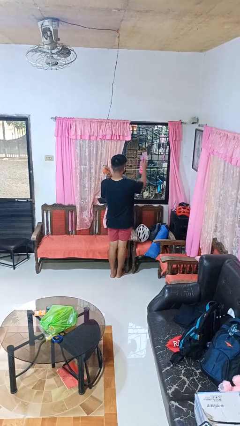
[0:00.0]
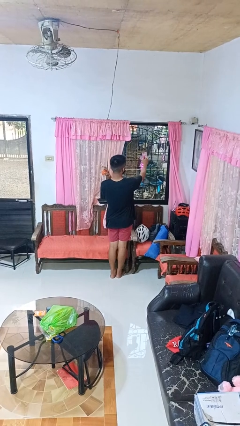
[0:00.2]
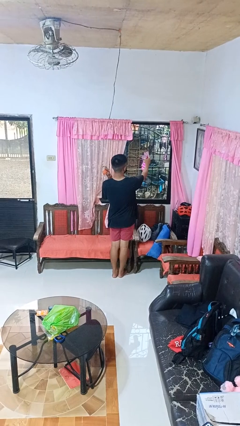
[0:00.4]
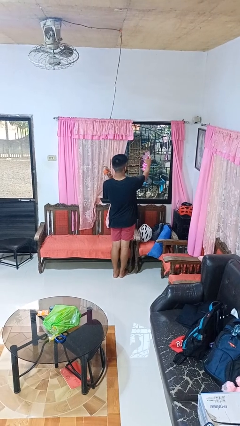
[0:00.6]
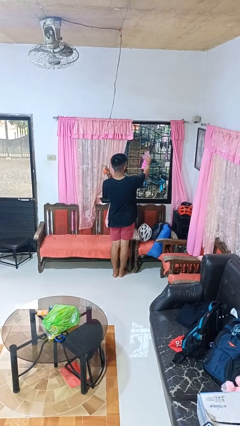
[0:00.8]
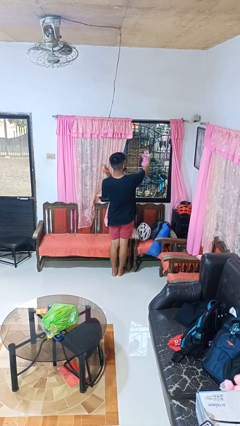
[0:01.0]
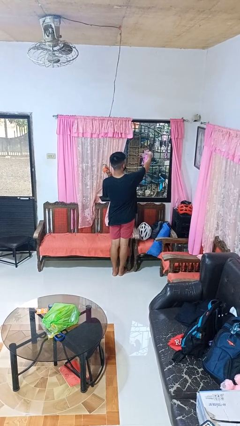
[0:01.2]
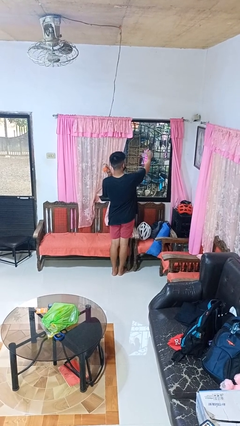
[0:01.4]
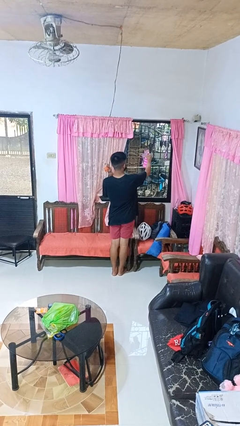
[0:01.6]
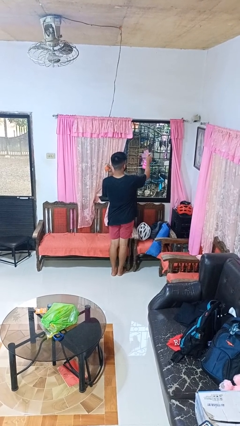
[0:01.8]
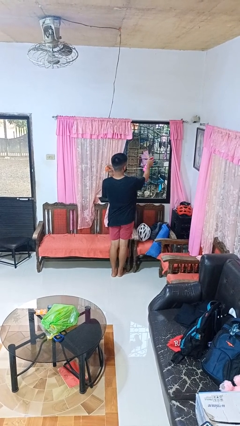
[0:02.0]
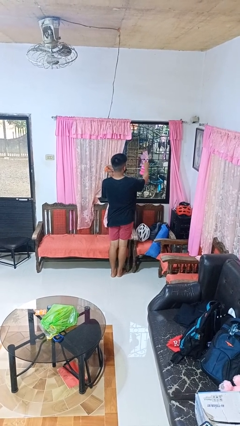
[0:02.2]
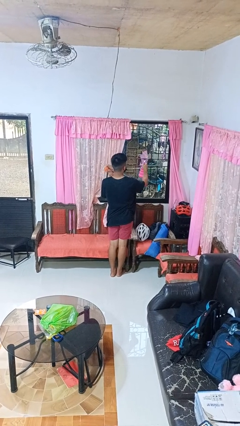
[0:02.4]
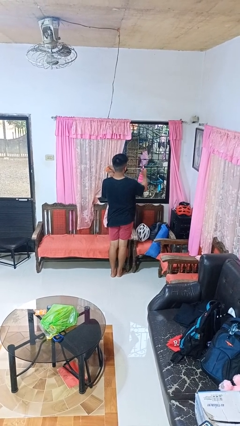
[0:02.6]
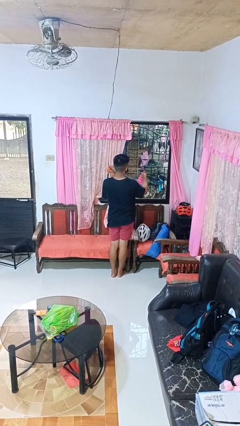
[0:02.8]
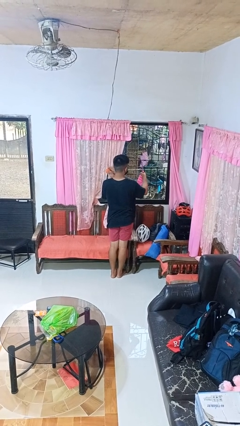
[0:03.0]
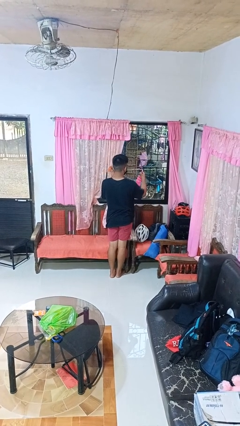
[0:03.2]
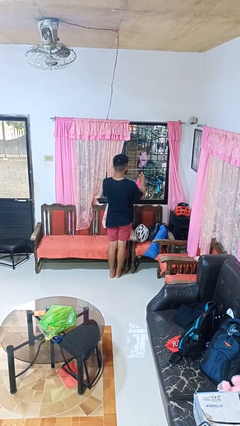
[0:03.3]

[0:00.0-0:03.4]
person sprays from bottle

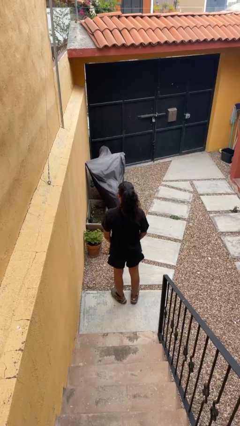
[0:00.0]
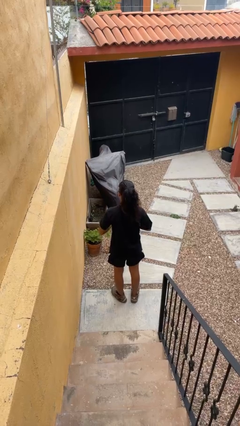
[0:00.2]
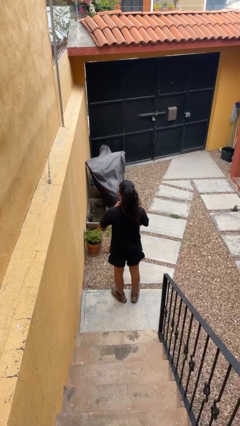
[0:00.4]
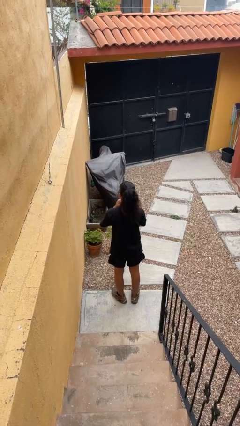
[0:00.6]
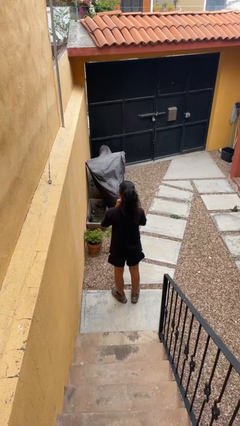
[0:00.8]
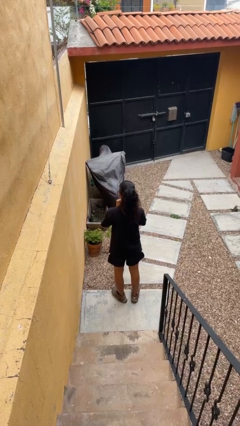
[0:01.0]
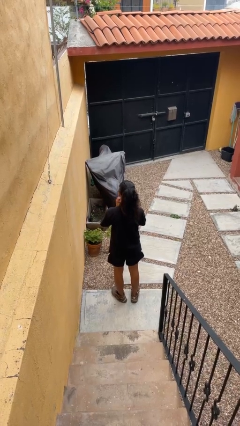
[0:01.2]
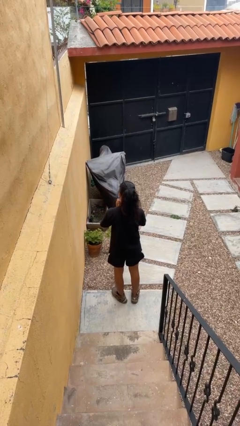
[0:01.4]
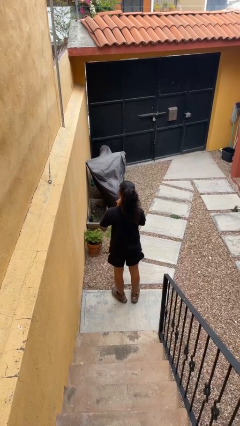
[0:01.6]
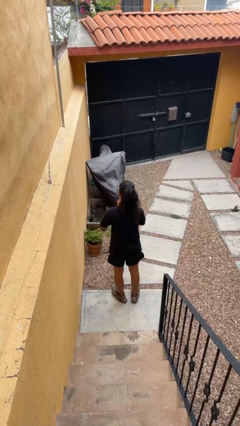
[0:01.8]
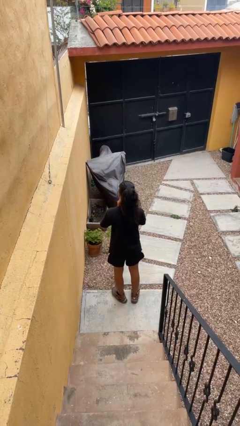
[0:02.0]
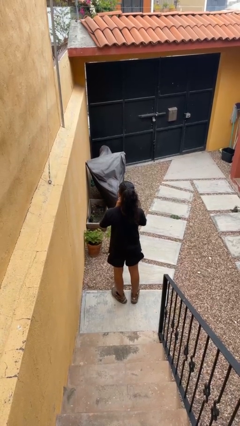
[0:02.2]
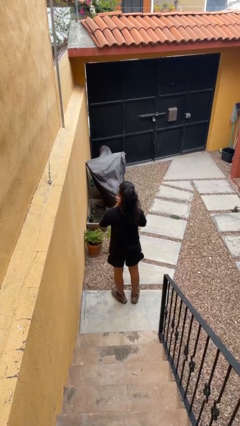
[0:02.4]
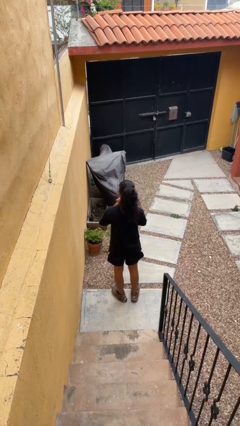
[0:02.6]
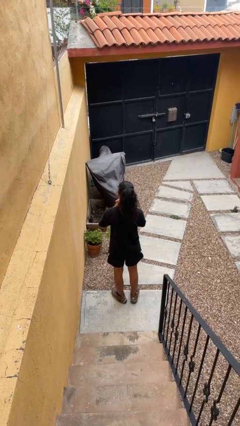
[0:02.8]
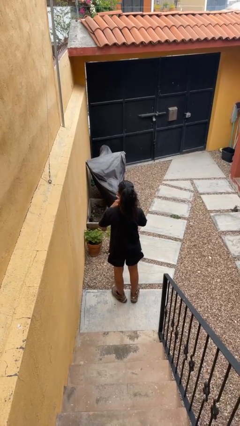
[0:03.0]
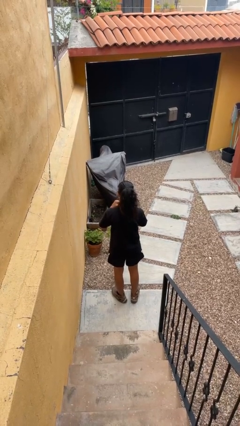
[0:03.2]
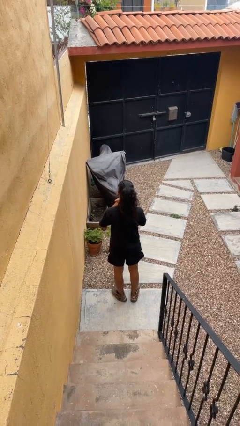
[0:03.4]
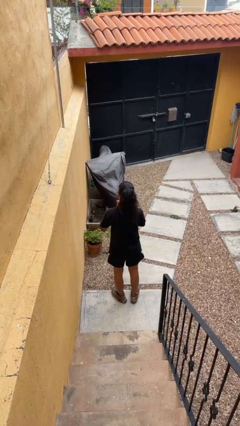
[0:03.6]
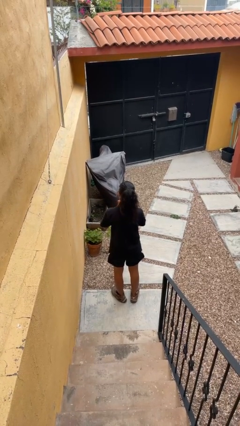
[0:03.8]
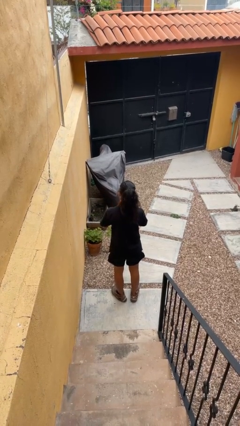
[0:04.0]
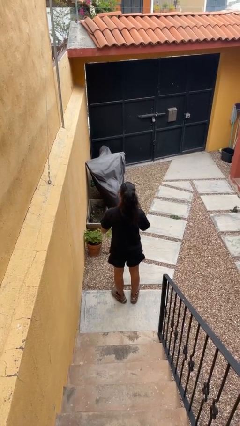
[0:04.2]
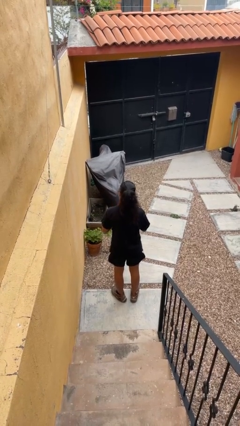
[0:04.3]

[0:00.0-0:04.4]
person cracks knuckles

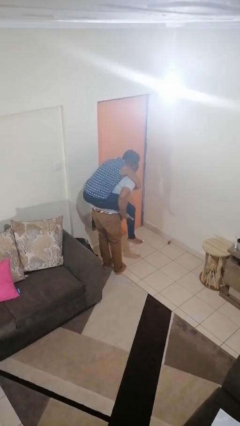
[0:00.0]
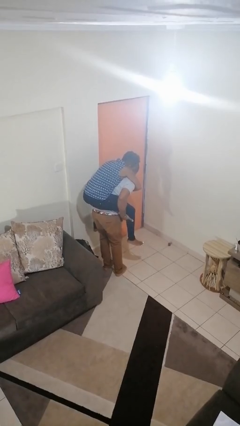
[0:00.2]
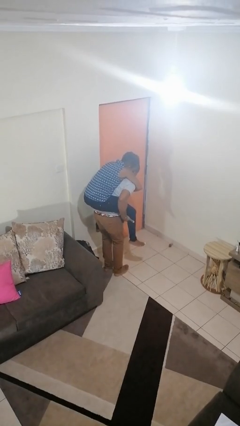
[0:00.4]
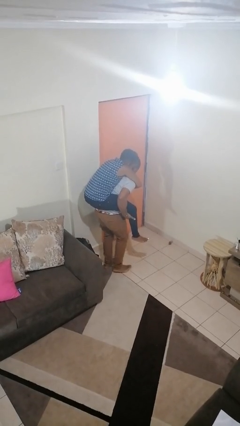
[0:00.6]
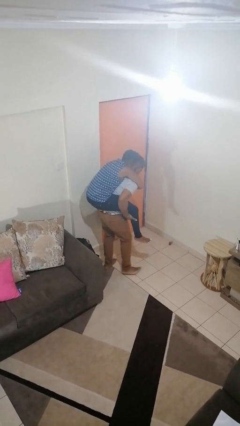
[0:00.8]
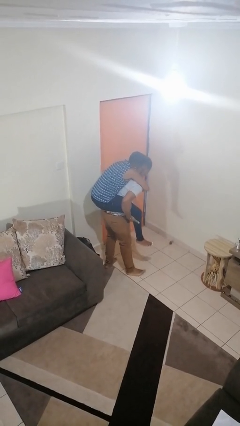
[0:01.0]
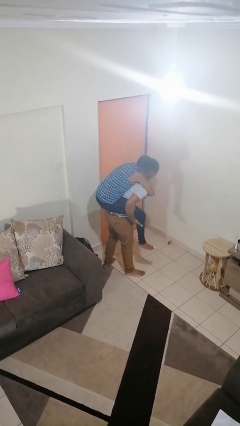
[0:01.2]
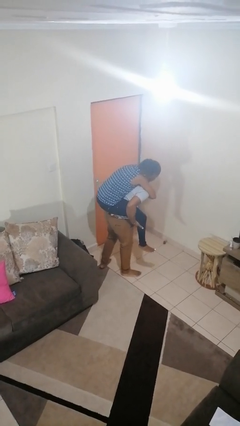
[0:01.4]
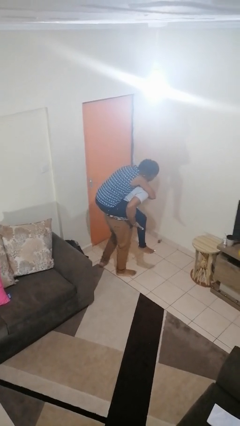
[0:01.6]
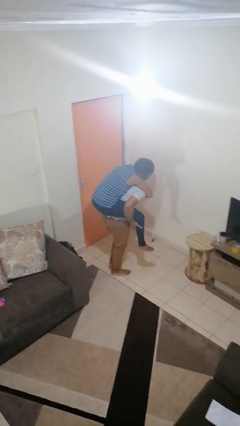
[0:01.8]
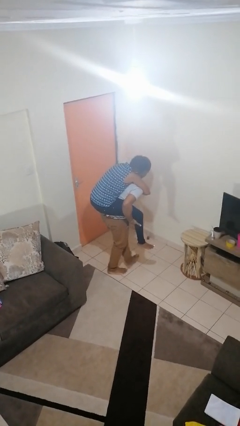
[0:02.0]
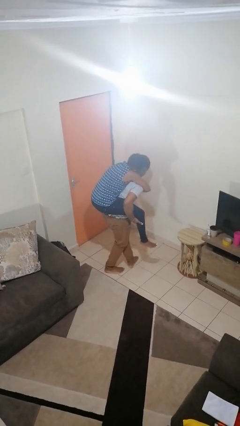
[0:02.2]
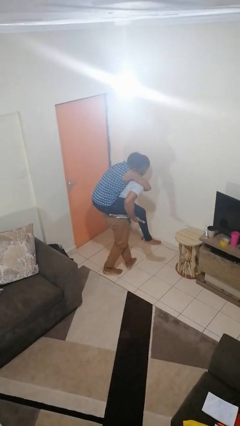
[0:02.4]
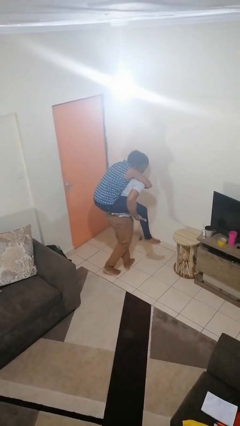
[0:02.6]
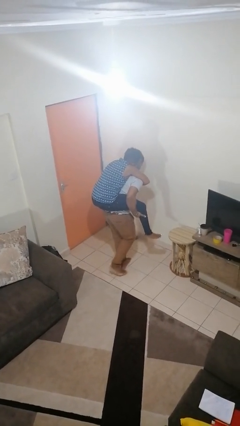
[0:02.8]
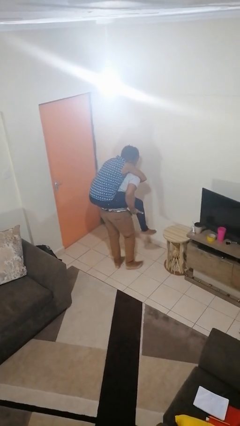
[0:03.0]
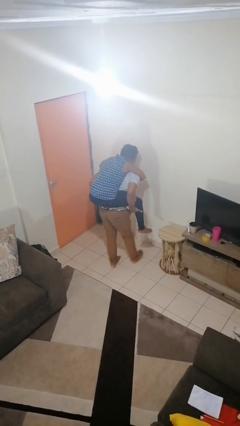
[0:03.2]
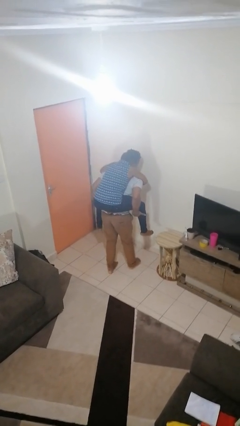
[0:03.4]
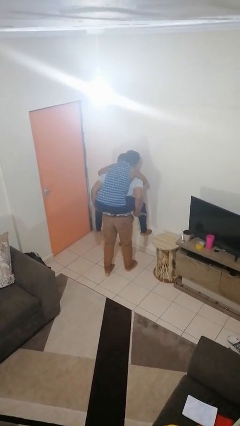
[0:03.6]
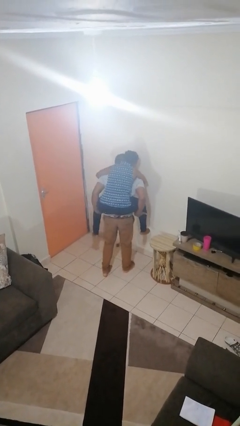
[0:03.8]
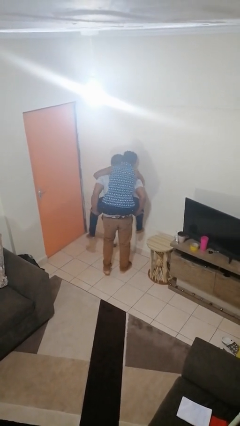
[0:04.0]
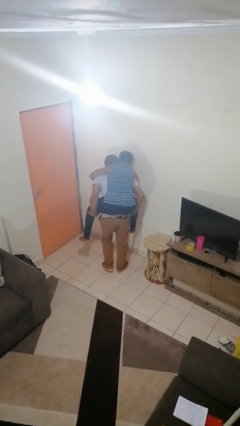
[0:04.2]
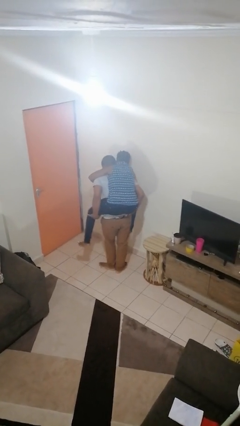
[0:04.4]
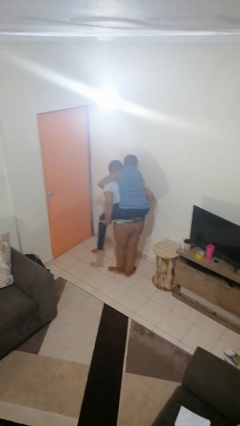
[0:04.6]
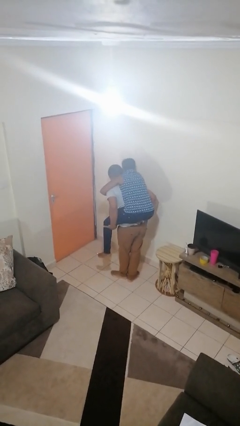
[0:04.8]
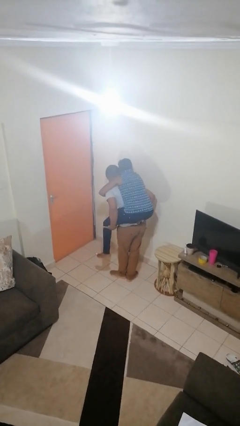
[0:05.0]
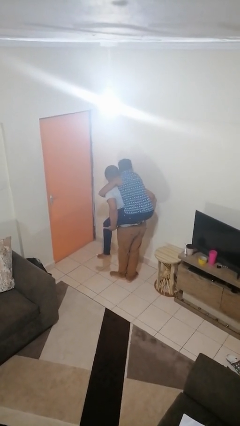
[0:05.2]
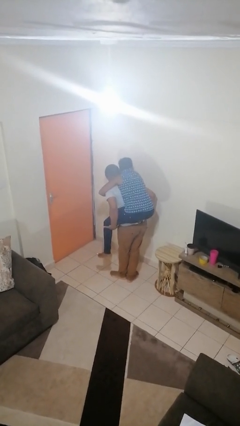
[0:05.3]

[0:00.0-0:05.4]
person carries person on back

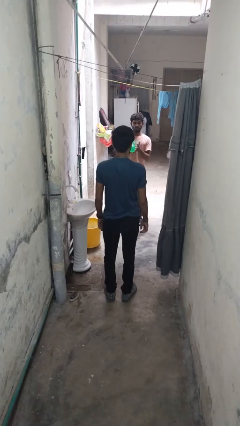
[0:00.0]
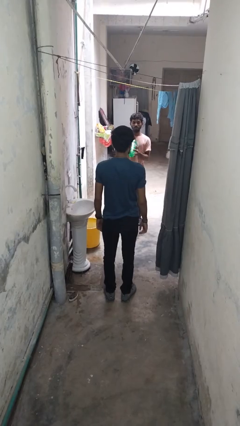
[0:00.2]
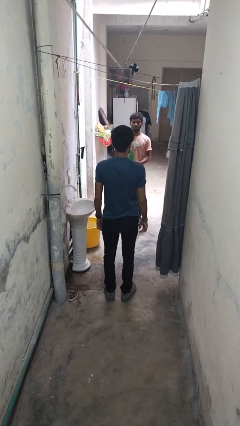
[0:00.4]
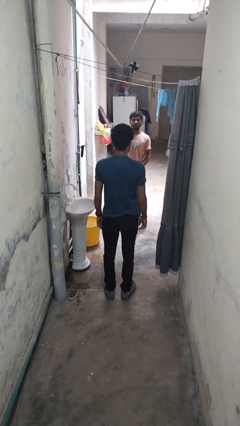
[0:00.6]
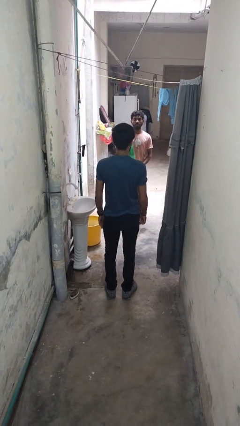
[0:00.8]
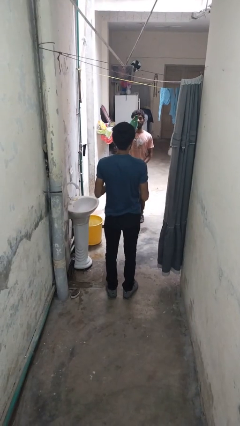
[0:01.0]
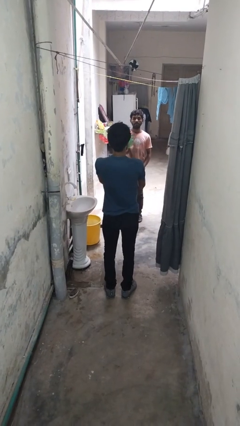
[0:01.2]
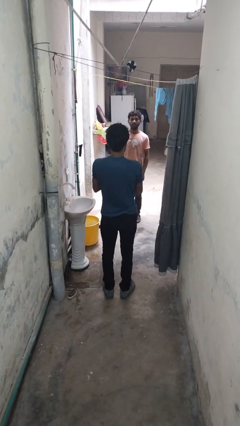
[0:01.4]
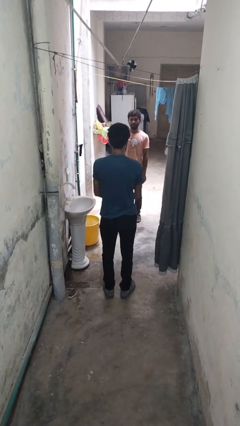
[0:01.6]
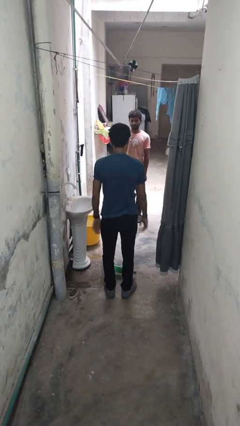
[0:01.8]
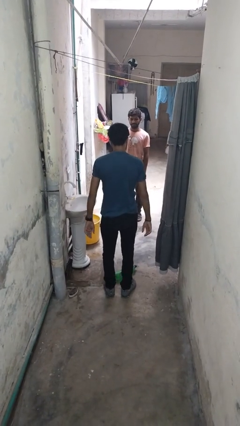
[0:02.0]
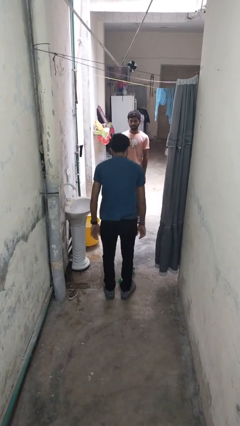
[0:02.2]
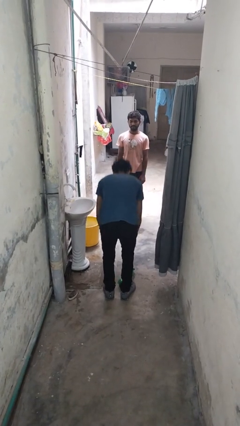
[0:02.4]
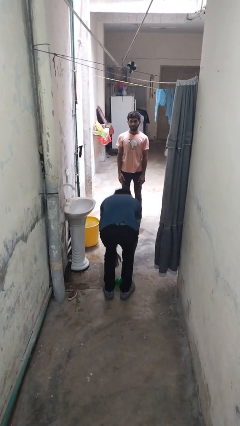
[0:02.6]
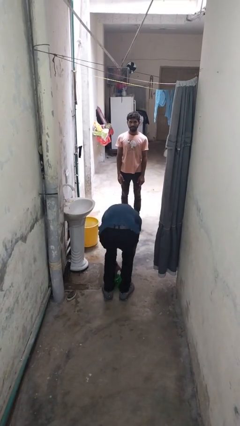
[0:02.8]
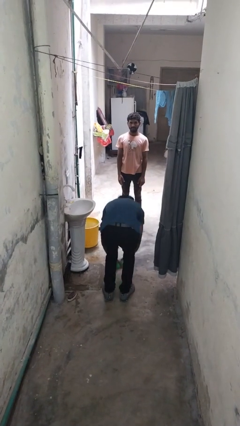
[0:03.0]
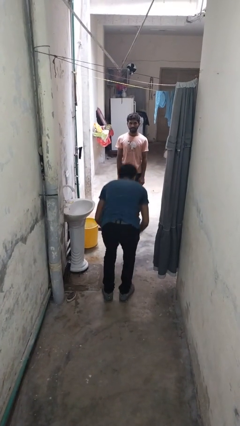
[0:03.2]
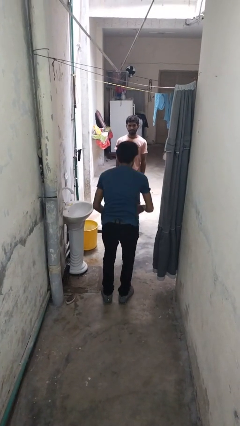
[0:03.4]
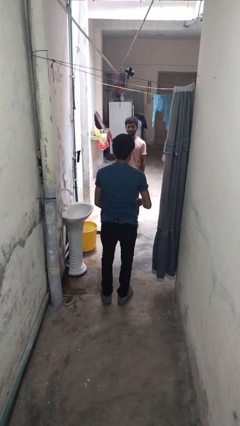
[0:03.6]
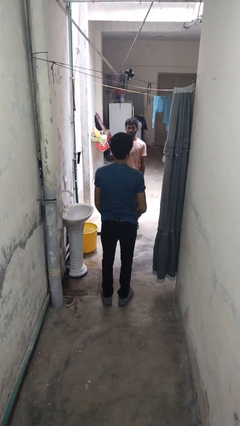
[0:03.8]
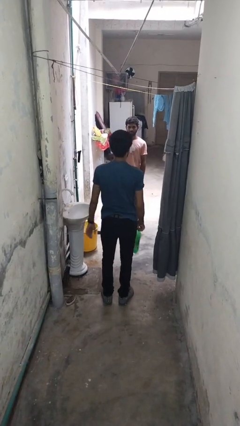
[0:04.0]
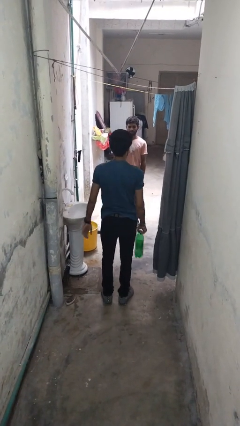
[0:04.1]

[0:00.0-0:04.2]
person catches object from person

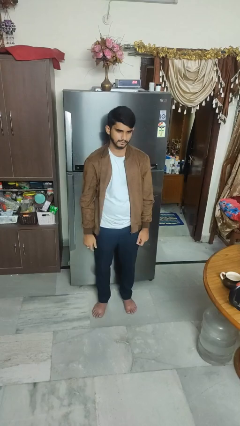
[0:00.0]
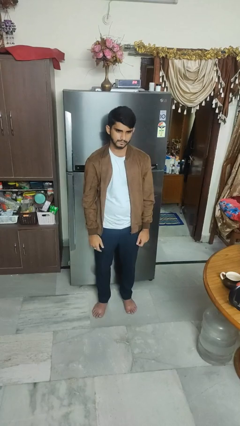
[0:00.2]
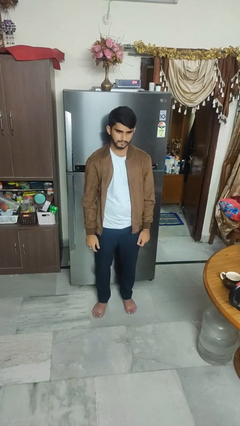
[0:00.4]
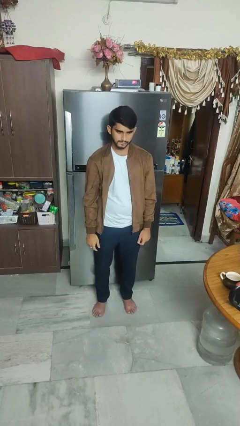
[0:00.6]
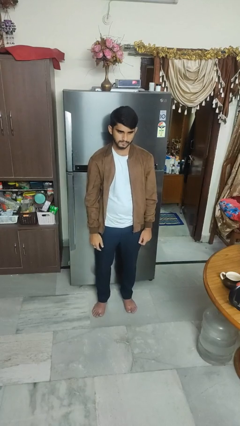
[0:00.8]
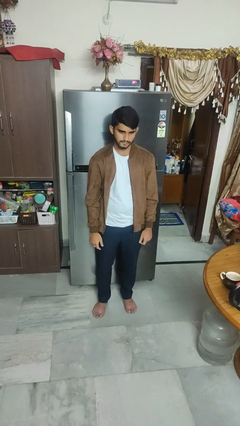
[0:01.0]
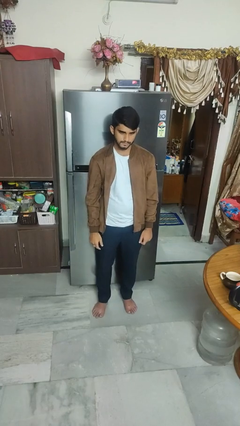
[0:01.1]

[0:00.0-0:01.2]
person gestures call me
